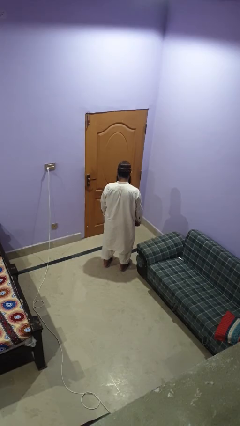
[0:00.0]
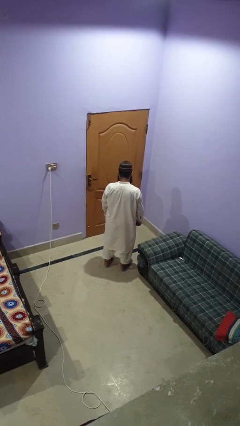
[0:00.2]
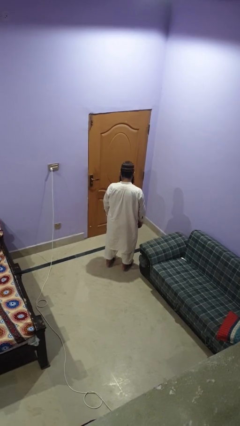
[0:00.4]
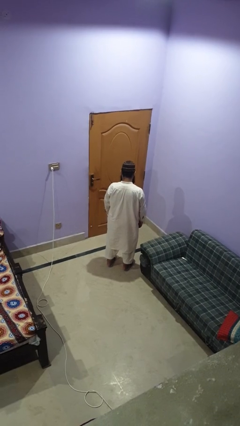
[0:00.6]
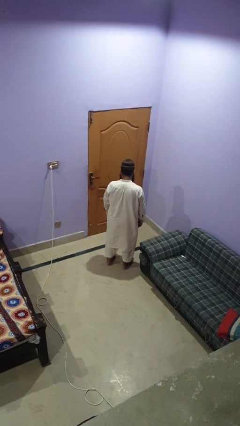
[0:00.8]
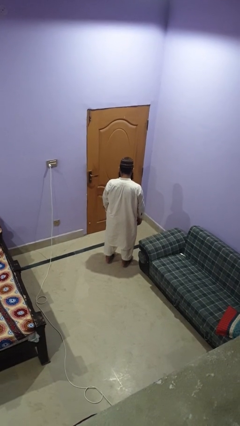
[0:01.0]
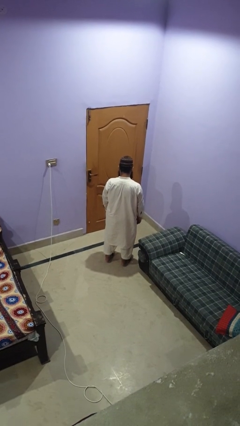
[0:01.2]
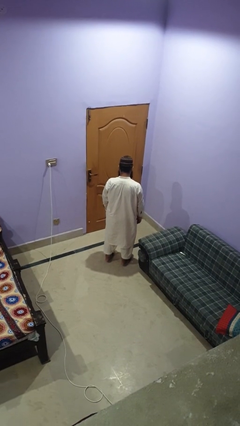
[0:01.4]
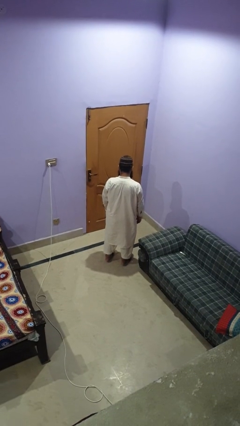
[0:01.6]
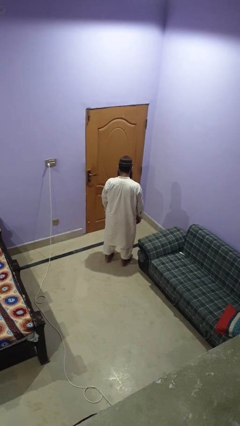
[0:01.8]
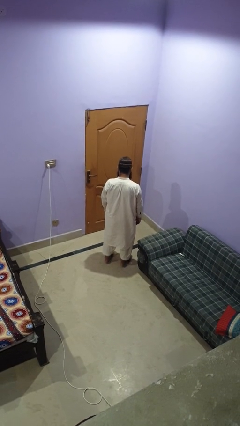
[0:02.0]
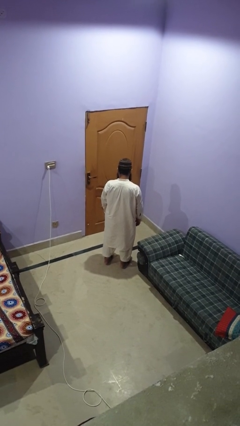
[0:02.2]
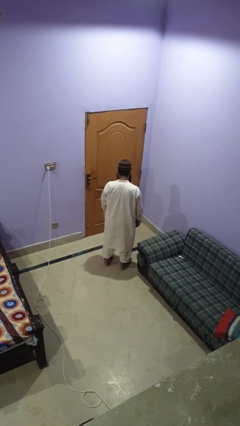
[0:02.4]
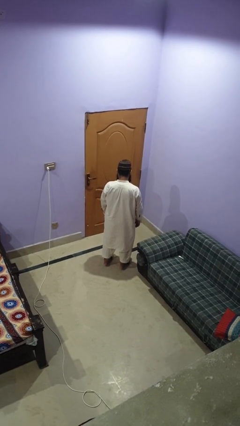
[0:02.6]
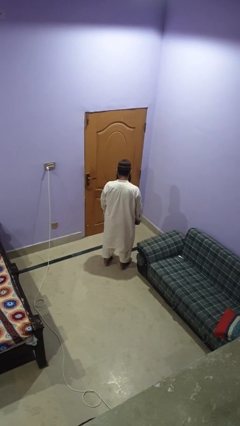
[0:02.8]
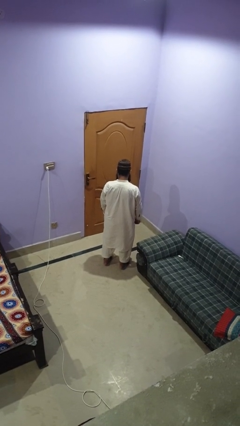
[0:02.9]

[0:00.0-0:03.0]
person gestures behind me

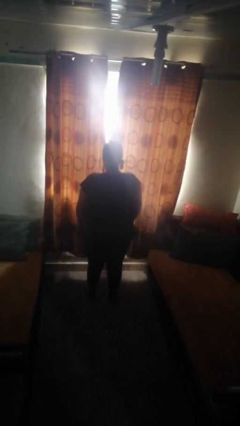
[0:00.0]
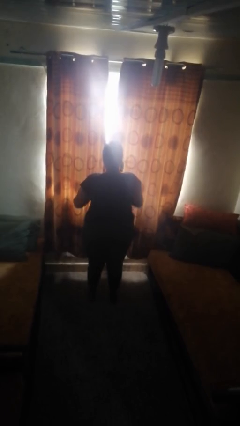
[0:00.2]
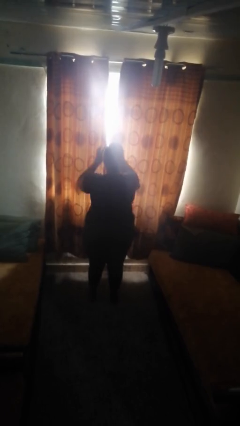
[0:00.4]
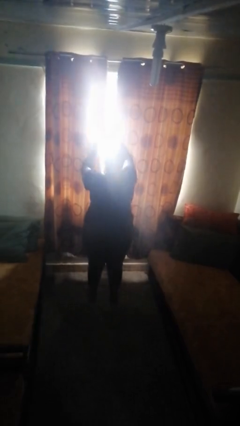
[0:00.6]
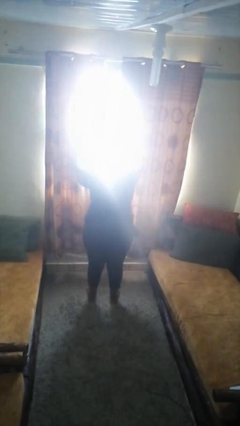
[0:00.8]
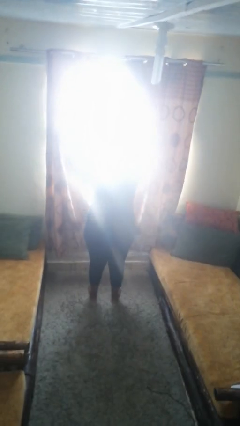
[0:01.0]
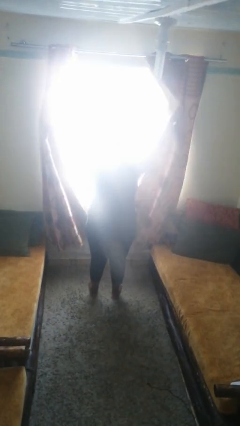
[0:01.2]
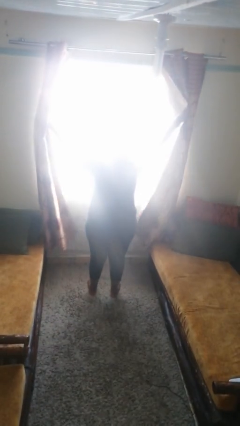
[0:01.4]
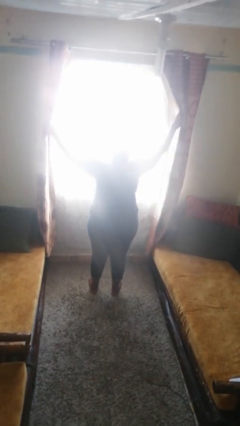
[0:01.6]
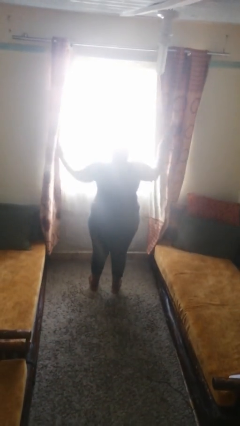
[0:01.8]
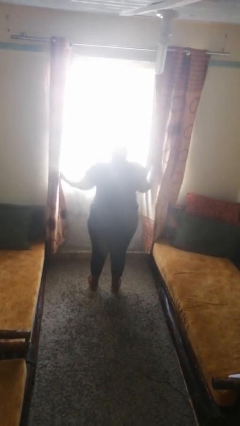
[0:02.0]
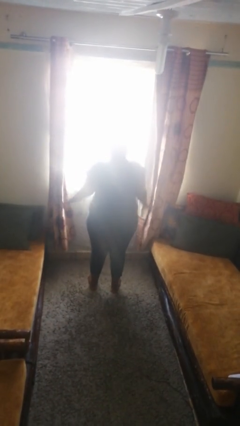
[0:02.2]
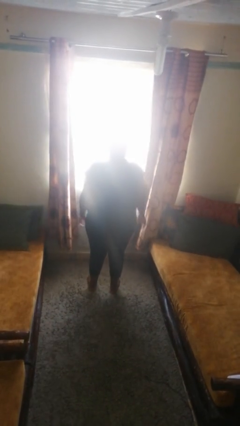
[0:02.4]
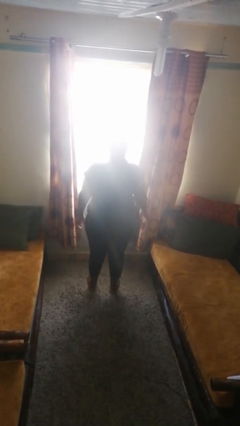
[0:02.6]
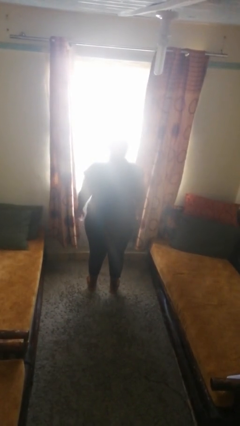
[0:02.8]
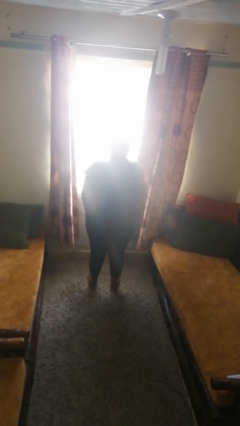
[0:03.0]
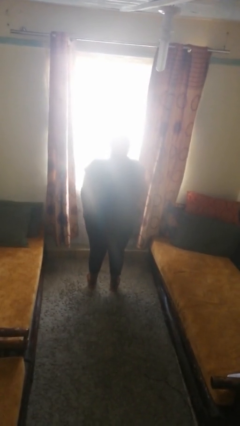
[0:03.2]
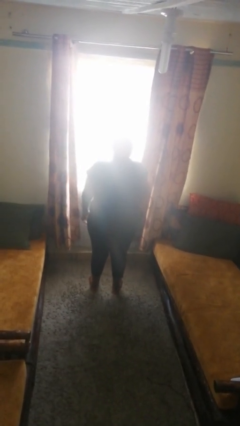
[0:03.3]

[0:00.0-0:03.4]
person opens curtains

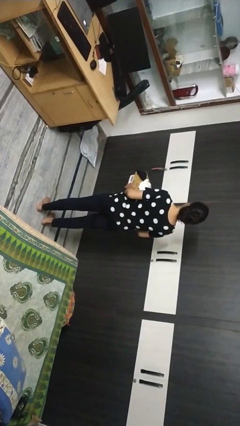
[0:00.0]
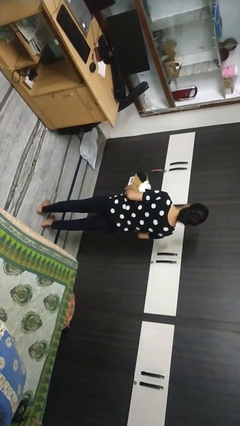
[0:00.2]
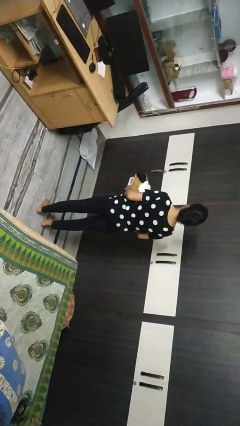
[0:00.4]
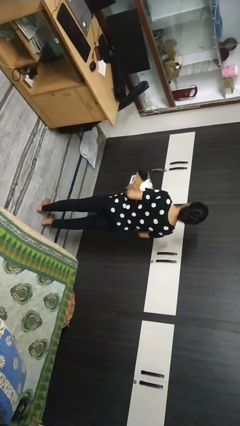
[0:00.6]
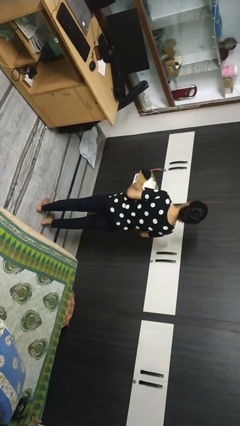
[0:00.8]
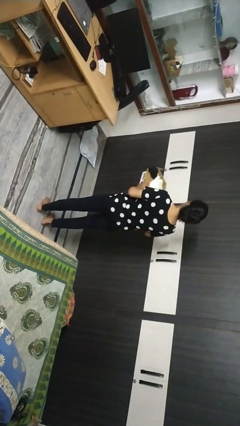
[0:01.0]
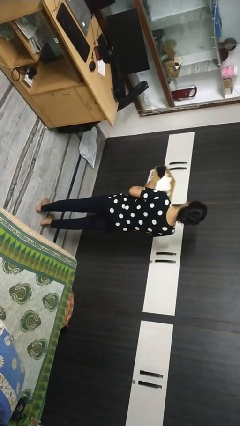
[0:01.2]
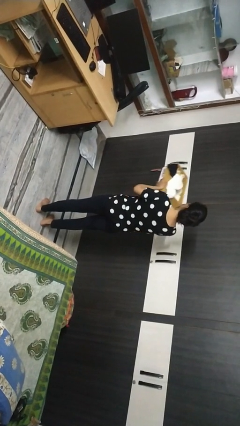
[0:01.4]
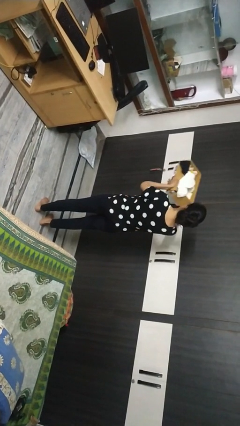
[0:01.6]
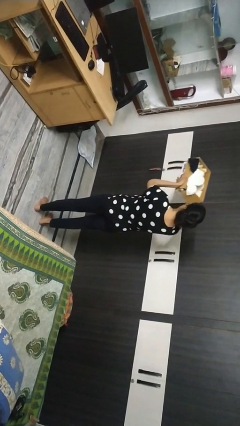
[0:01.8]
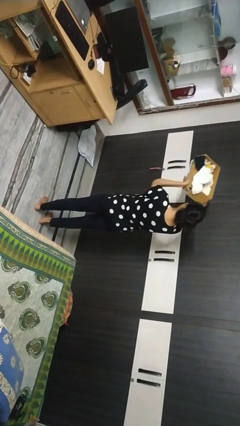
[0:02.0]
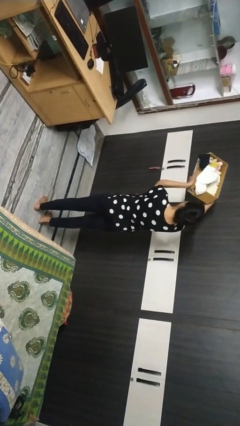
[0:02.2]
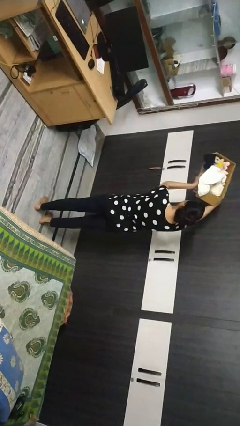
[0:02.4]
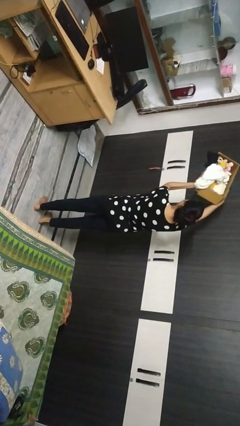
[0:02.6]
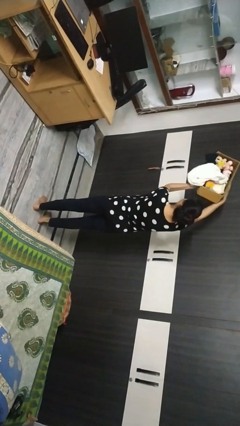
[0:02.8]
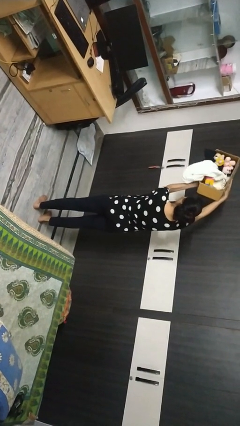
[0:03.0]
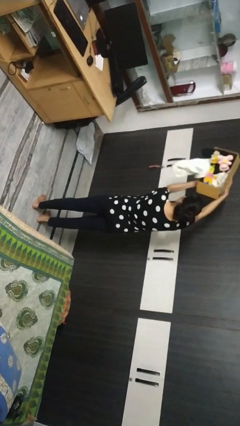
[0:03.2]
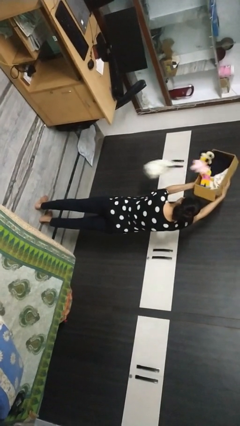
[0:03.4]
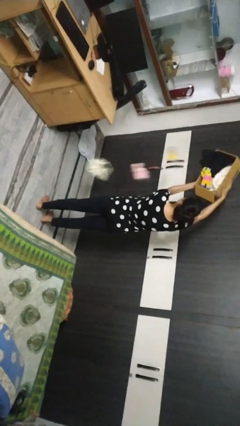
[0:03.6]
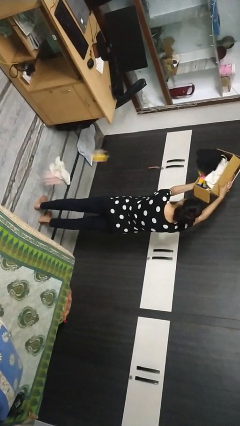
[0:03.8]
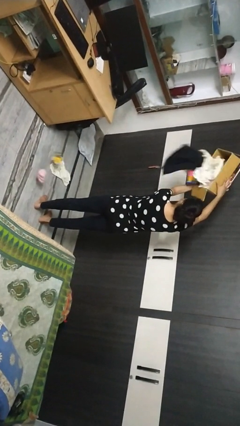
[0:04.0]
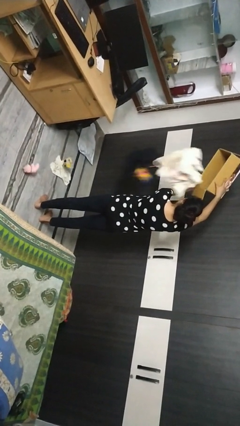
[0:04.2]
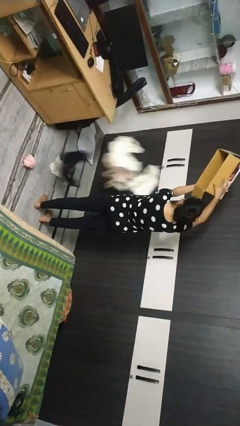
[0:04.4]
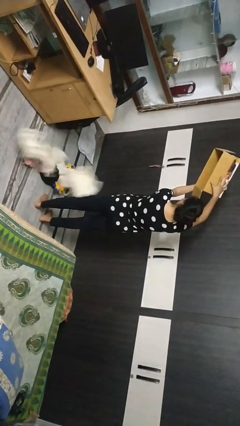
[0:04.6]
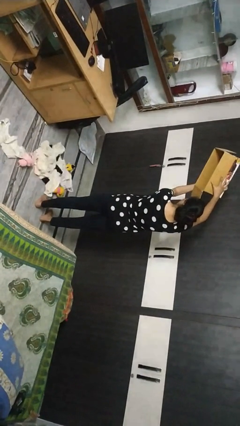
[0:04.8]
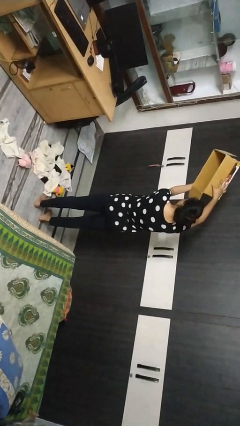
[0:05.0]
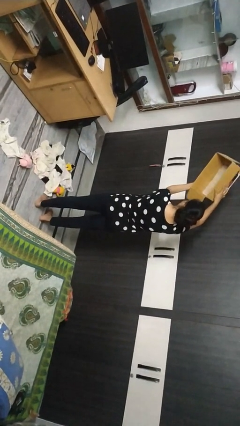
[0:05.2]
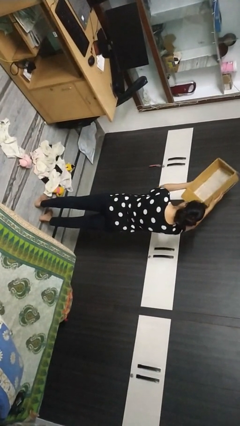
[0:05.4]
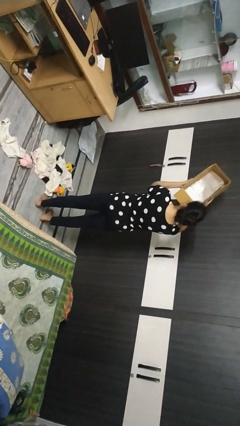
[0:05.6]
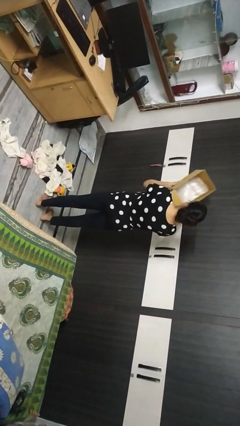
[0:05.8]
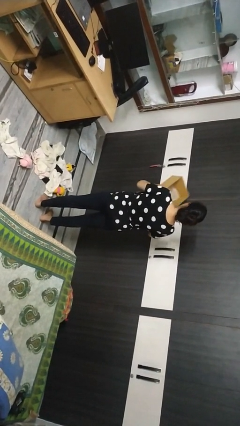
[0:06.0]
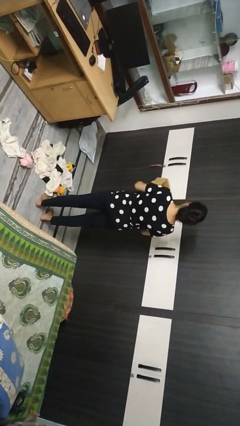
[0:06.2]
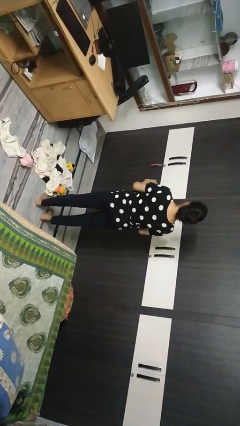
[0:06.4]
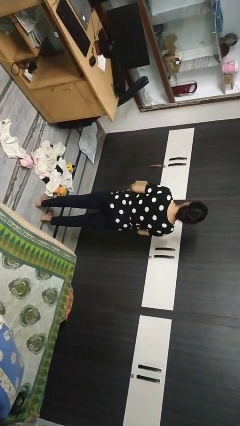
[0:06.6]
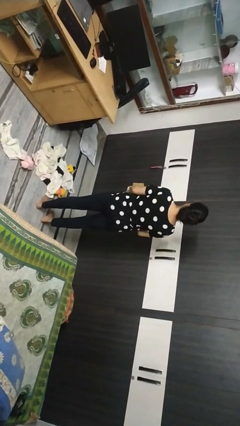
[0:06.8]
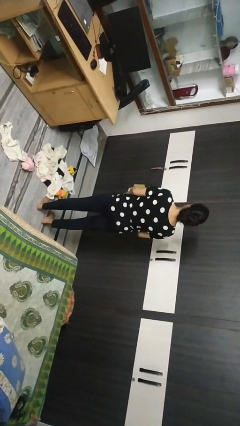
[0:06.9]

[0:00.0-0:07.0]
person unloads box onto floor

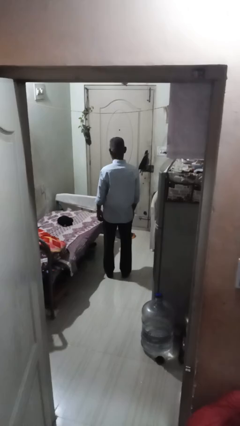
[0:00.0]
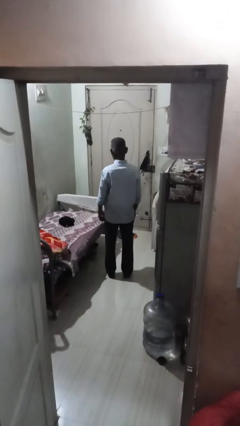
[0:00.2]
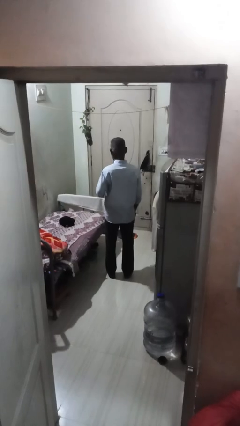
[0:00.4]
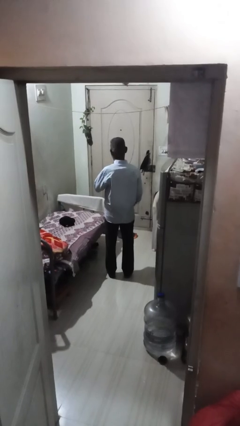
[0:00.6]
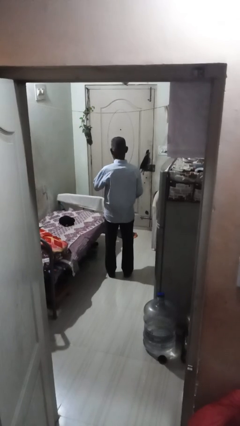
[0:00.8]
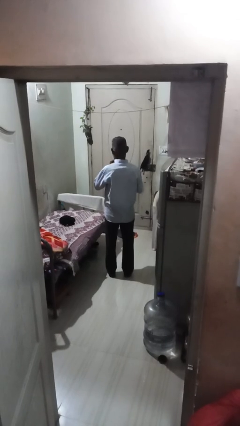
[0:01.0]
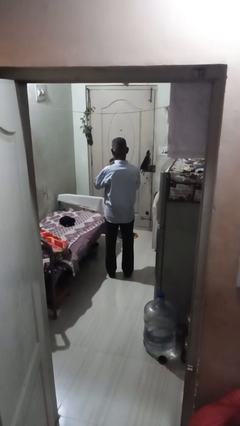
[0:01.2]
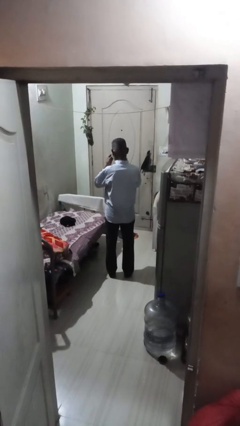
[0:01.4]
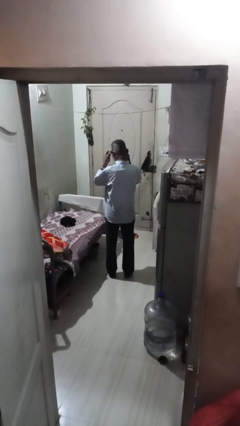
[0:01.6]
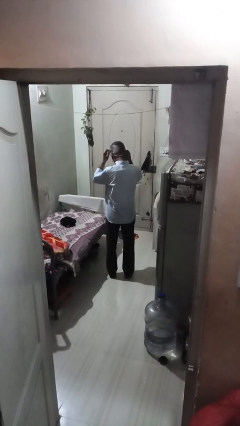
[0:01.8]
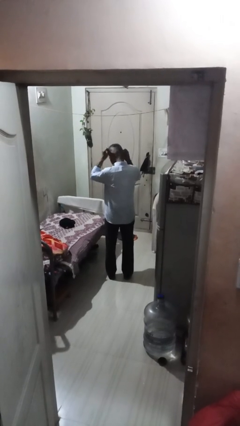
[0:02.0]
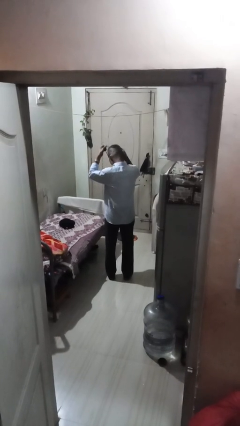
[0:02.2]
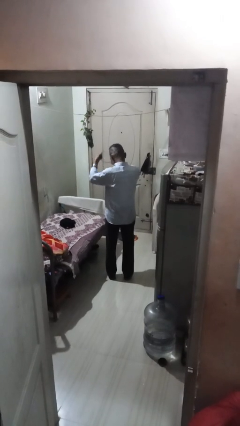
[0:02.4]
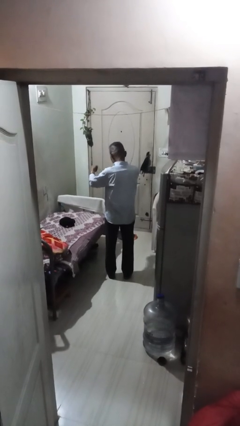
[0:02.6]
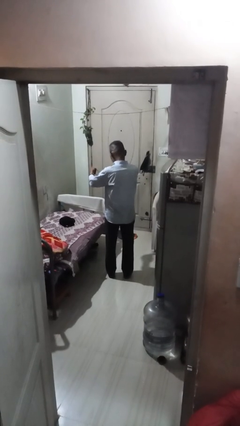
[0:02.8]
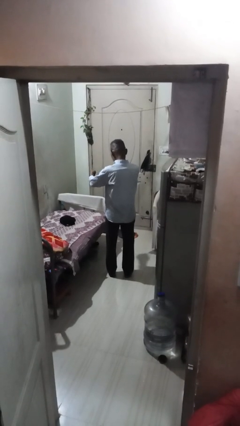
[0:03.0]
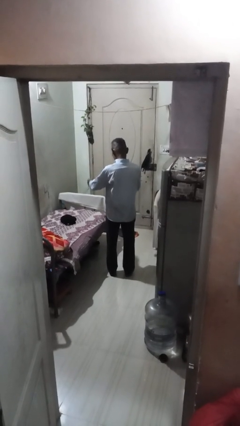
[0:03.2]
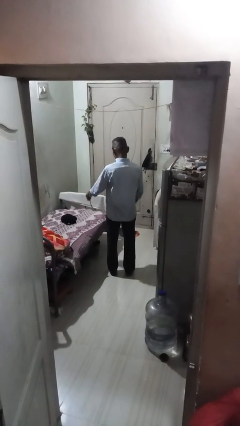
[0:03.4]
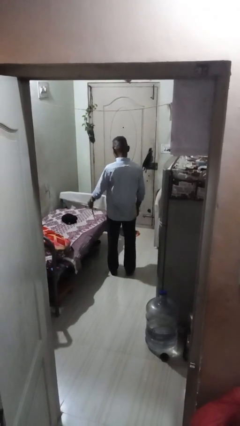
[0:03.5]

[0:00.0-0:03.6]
person takes off necklace

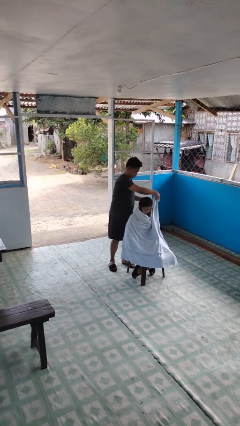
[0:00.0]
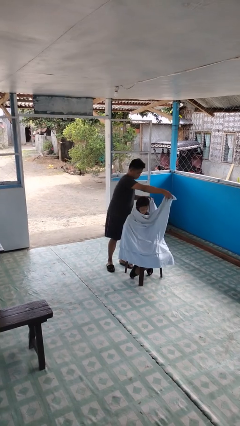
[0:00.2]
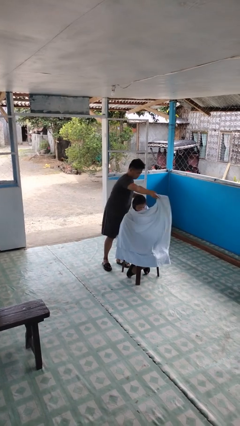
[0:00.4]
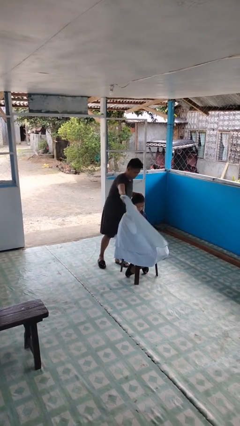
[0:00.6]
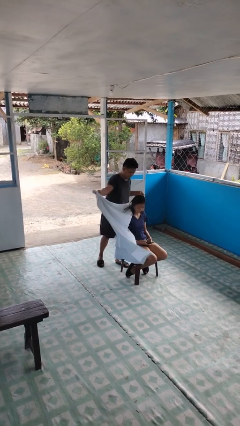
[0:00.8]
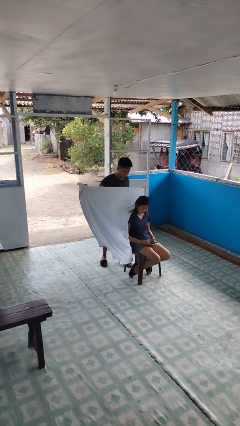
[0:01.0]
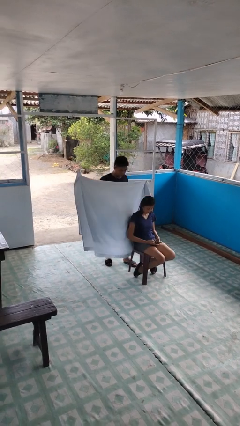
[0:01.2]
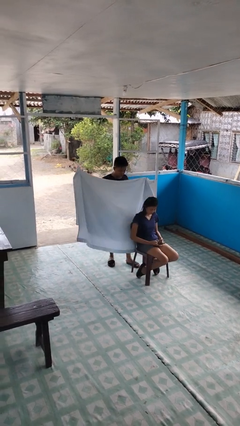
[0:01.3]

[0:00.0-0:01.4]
person uncovers friend with blanket
